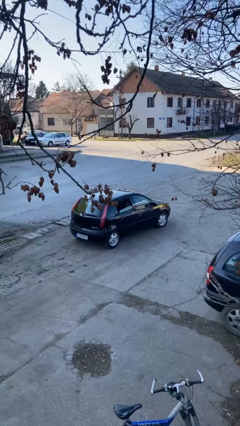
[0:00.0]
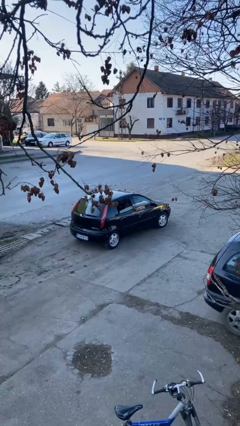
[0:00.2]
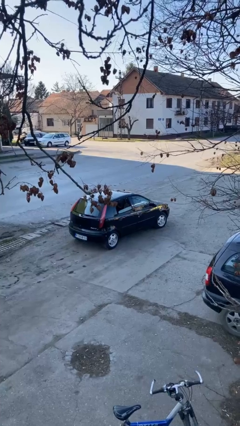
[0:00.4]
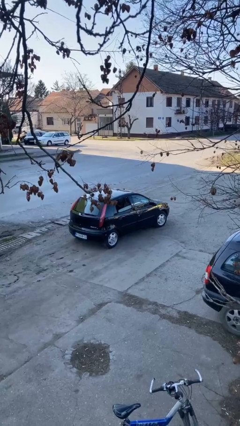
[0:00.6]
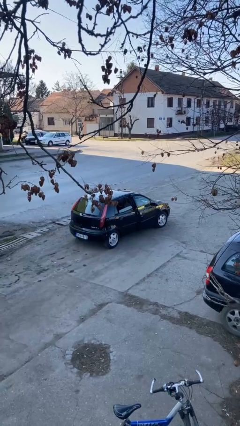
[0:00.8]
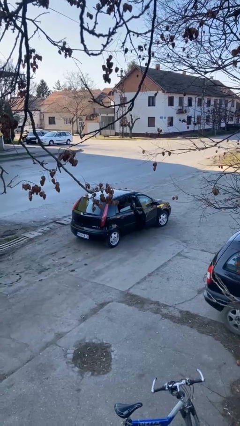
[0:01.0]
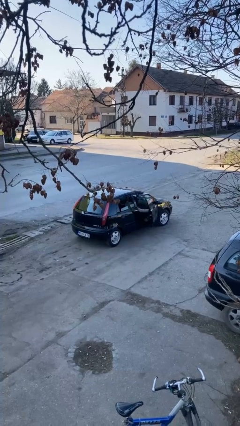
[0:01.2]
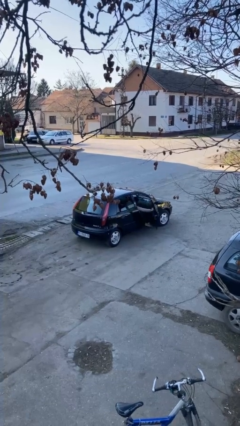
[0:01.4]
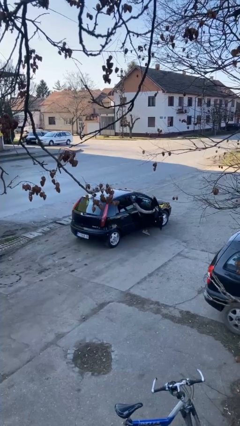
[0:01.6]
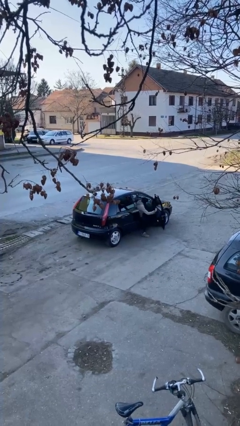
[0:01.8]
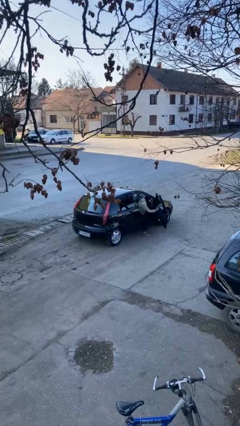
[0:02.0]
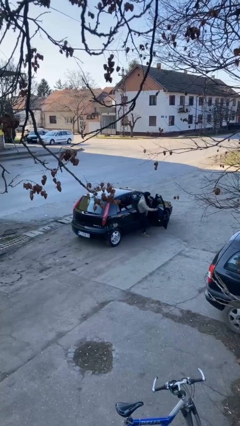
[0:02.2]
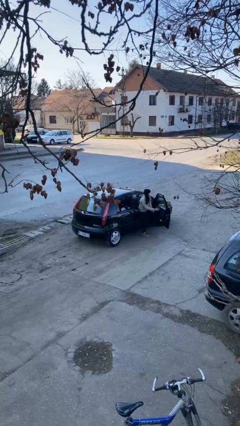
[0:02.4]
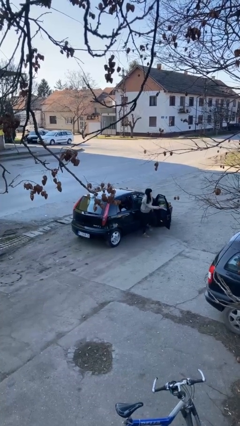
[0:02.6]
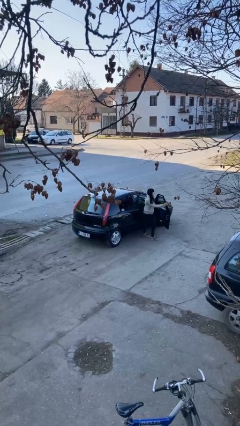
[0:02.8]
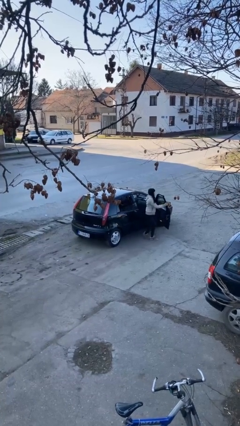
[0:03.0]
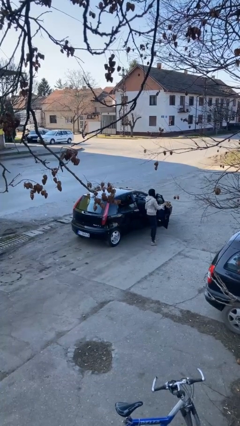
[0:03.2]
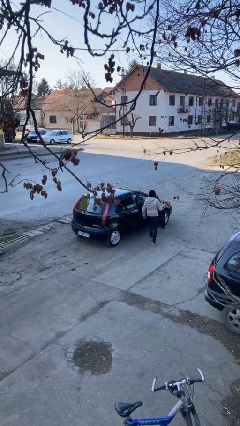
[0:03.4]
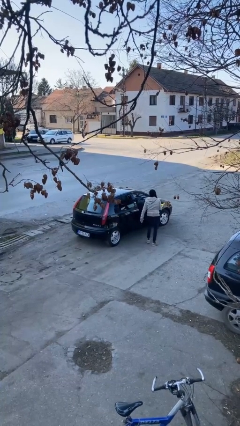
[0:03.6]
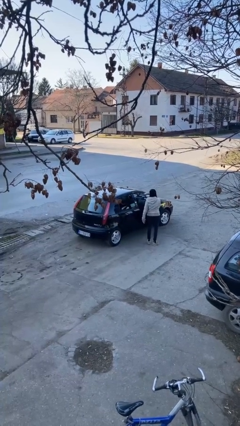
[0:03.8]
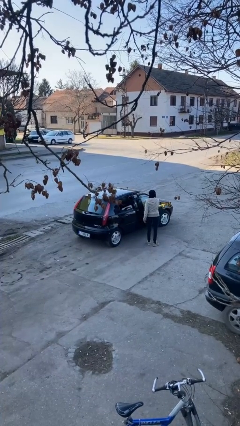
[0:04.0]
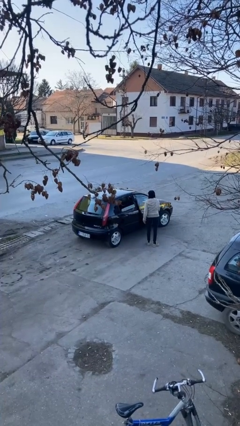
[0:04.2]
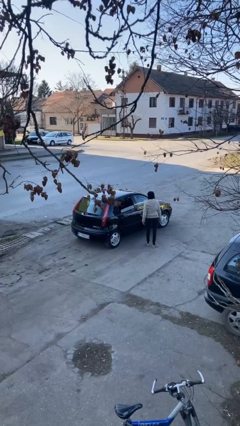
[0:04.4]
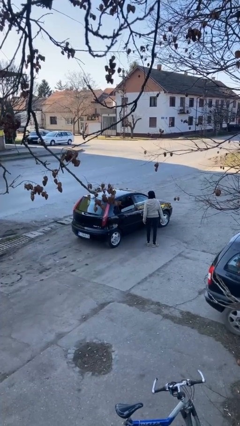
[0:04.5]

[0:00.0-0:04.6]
car drops off person

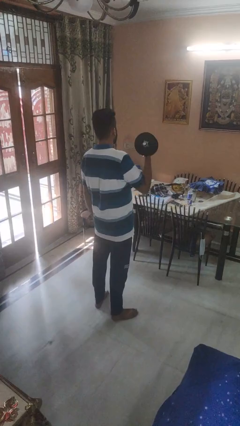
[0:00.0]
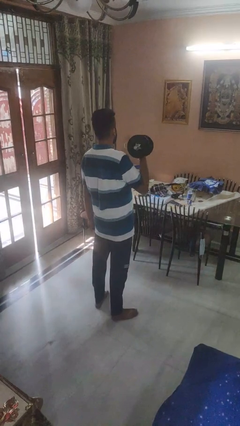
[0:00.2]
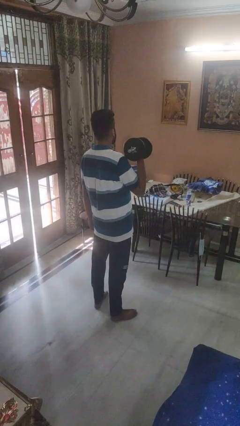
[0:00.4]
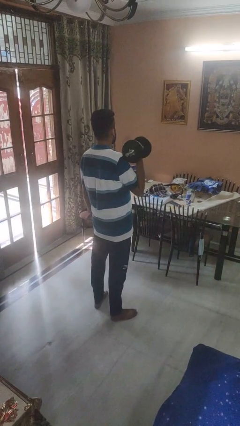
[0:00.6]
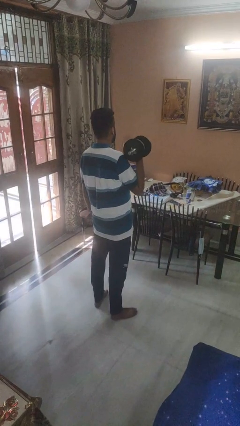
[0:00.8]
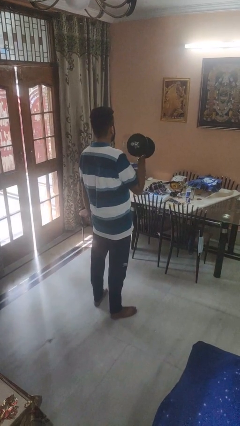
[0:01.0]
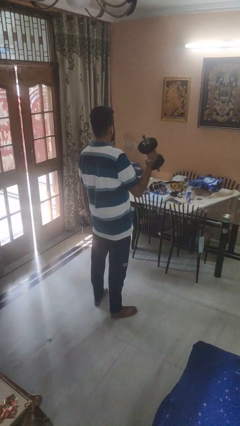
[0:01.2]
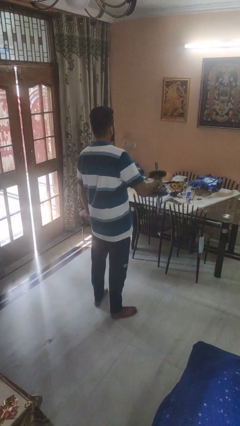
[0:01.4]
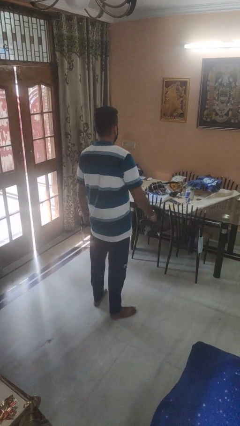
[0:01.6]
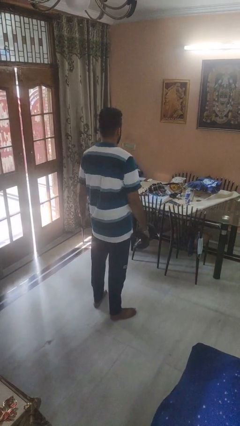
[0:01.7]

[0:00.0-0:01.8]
person lifts dumbbells

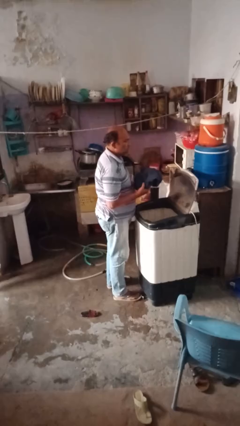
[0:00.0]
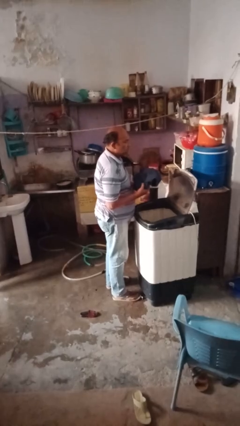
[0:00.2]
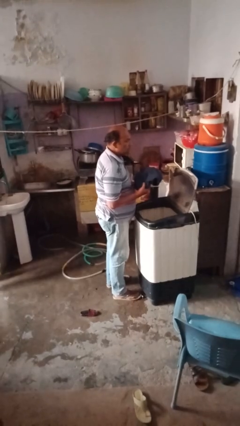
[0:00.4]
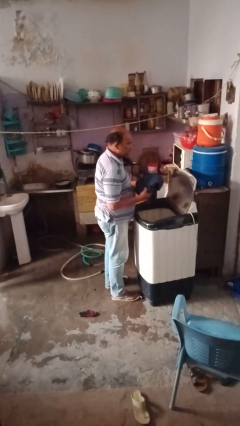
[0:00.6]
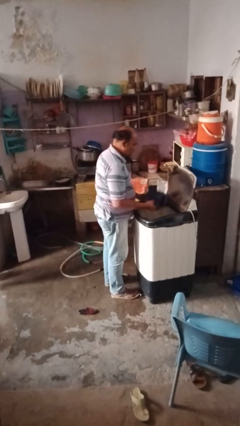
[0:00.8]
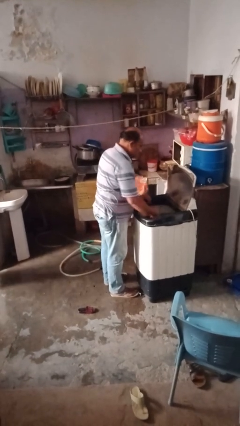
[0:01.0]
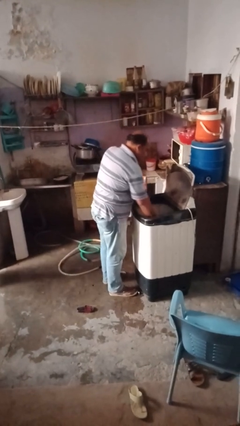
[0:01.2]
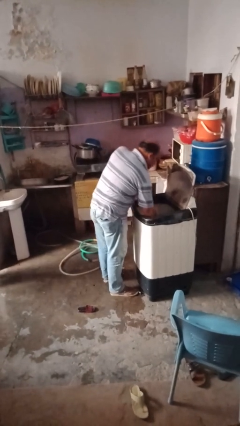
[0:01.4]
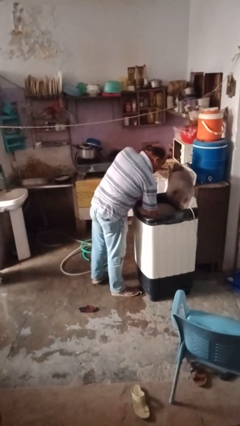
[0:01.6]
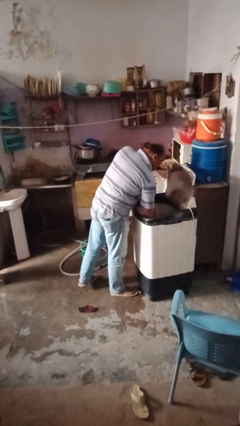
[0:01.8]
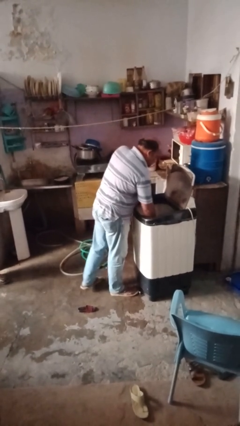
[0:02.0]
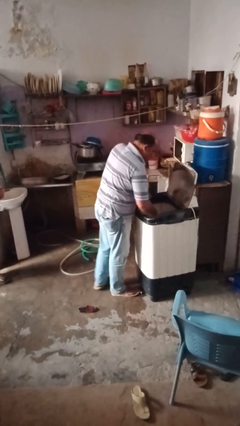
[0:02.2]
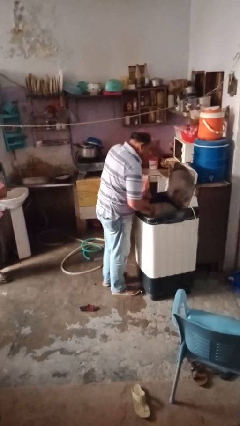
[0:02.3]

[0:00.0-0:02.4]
person loads clotheswasher

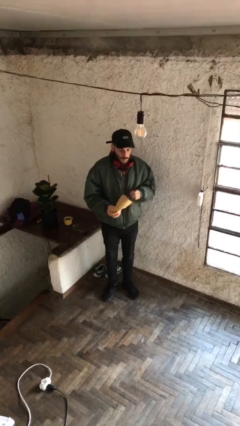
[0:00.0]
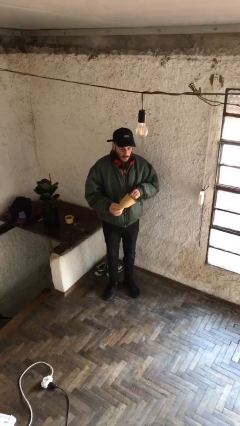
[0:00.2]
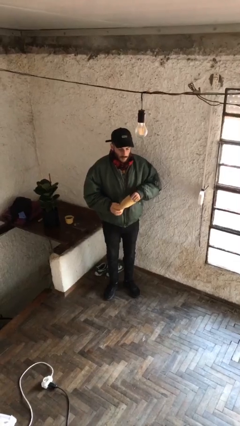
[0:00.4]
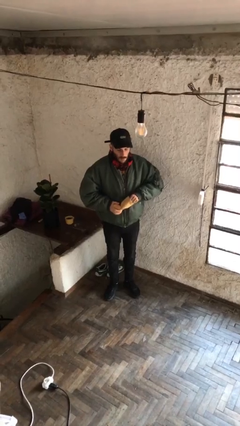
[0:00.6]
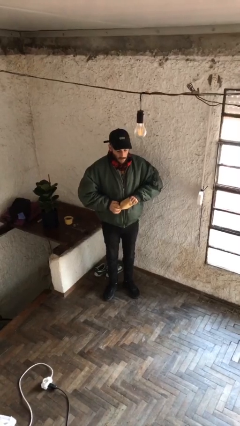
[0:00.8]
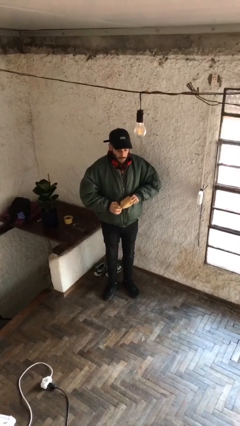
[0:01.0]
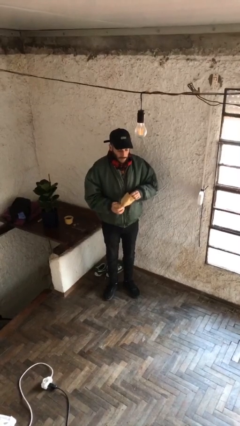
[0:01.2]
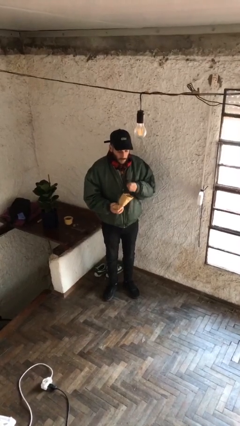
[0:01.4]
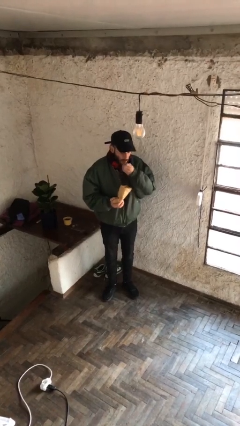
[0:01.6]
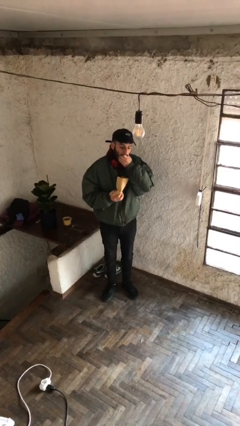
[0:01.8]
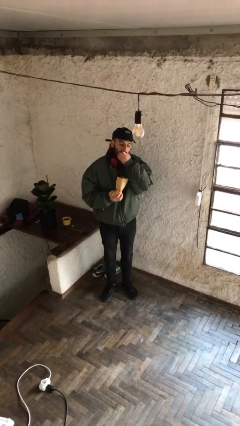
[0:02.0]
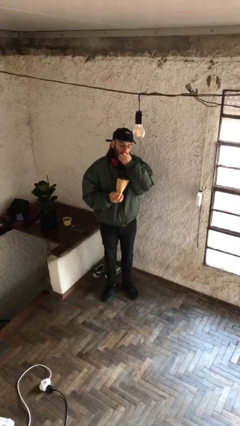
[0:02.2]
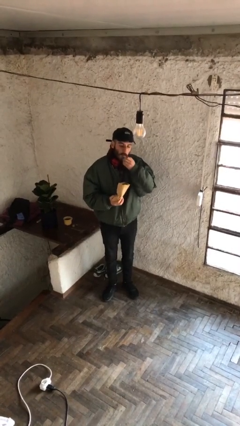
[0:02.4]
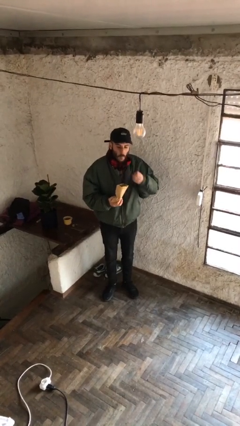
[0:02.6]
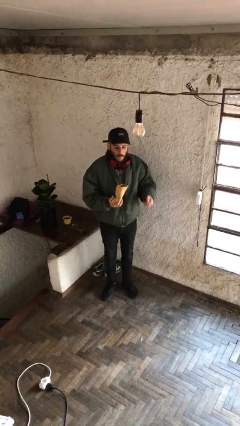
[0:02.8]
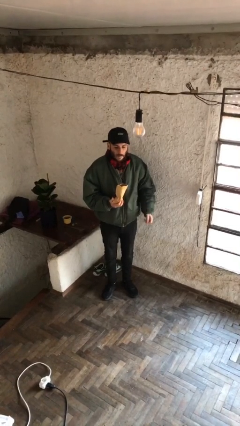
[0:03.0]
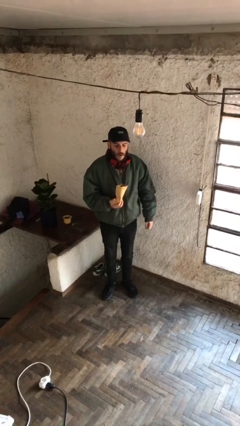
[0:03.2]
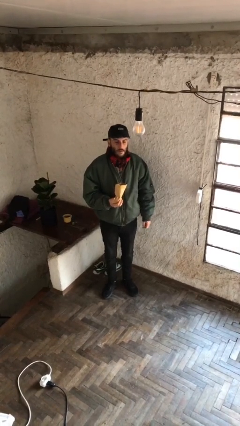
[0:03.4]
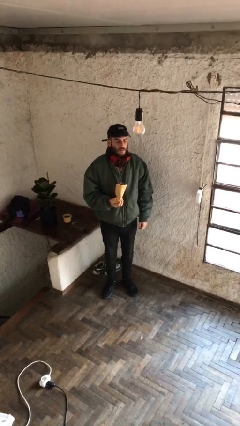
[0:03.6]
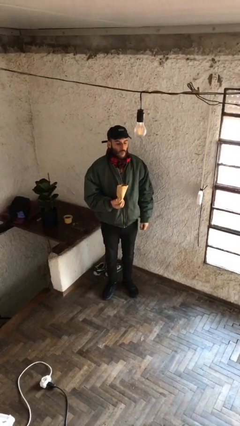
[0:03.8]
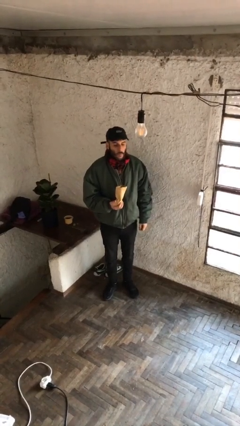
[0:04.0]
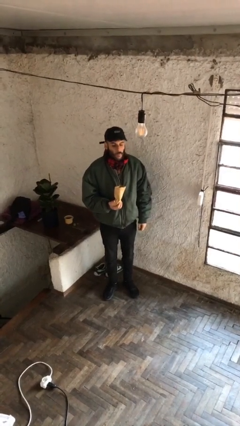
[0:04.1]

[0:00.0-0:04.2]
person eats snack from bag

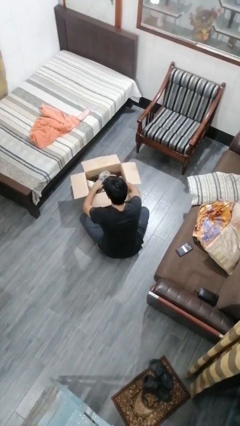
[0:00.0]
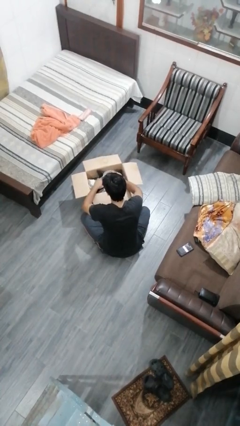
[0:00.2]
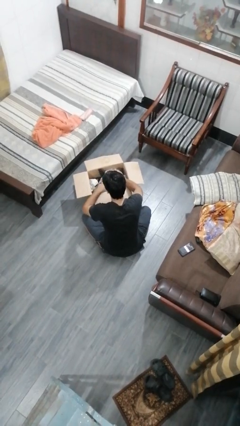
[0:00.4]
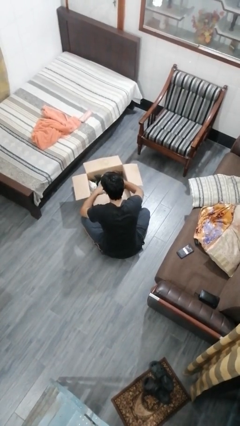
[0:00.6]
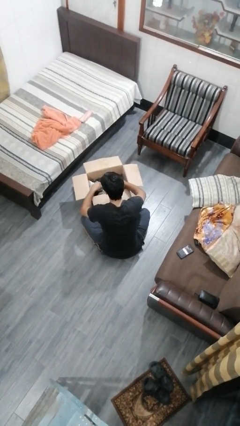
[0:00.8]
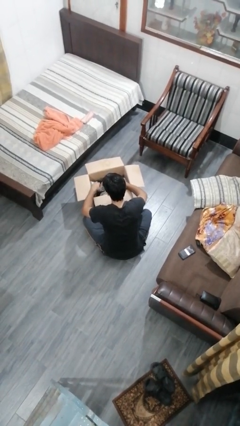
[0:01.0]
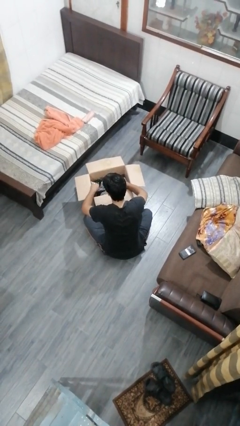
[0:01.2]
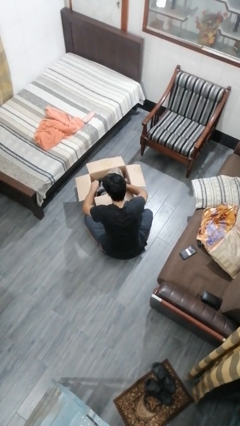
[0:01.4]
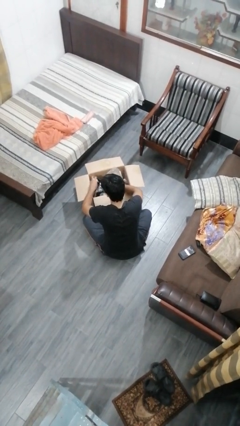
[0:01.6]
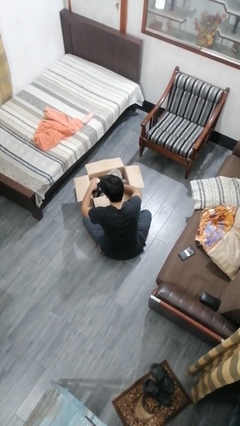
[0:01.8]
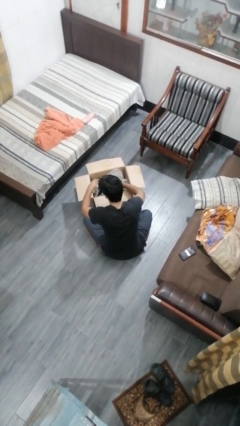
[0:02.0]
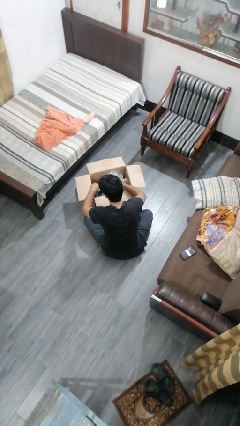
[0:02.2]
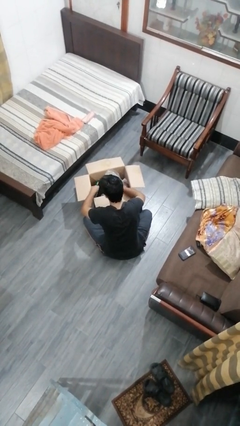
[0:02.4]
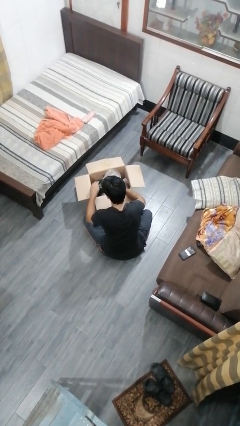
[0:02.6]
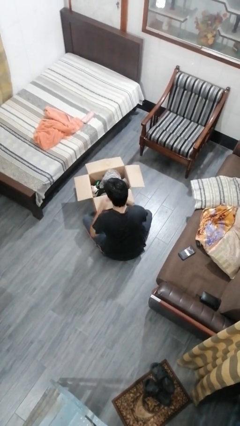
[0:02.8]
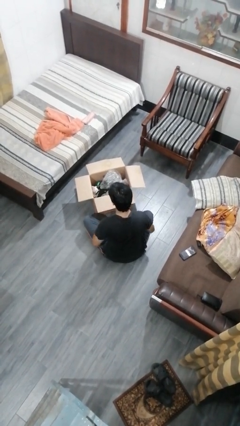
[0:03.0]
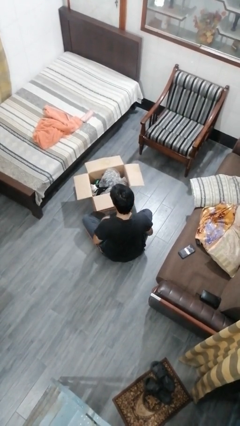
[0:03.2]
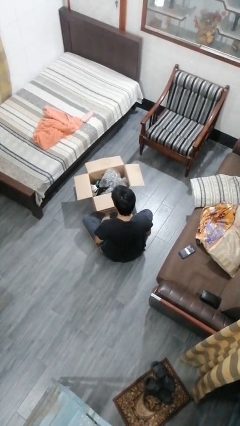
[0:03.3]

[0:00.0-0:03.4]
person searches in box

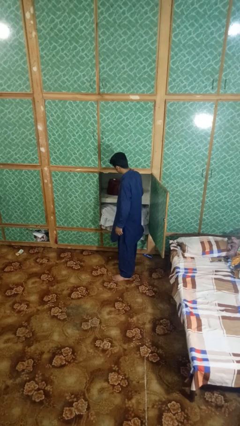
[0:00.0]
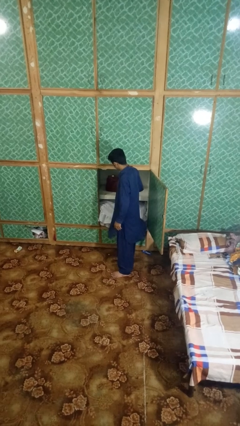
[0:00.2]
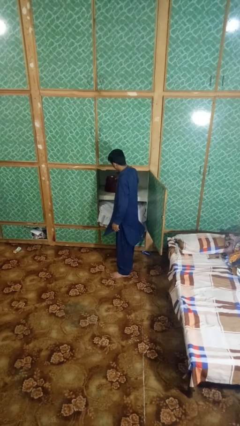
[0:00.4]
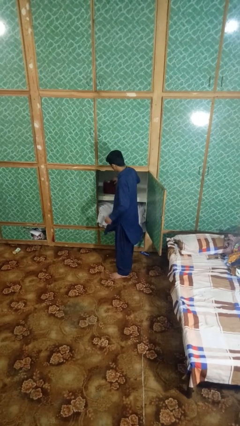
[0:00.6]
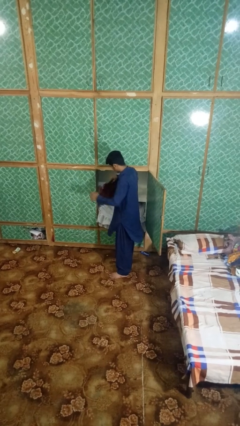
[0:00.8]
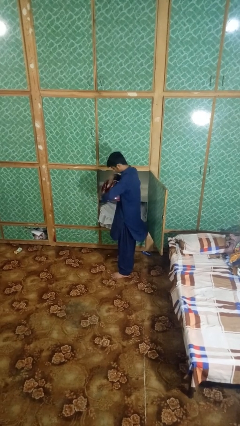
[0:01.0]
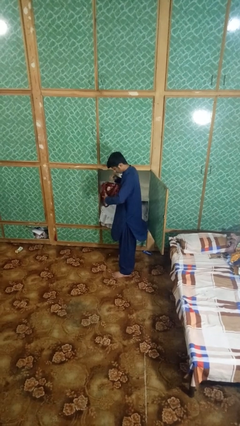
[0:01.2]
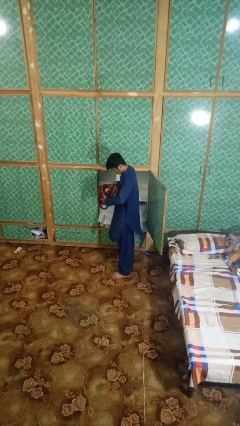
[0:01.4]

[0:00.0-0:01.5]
person searches in purse
